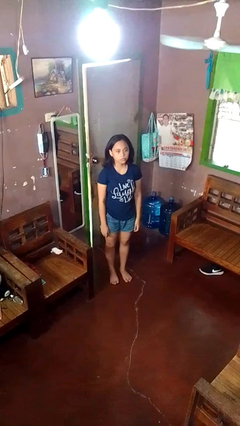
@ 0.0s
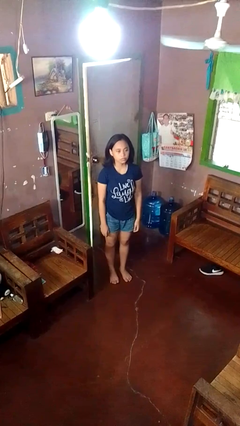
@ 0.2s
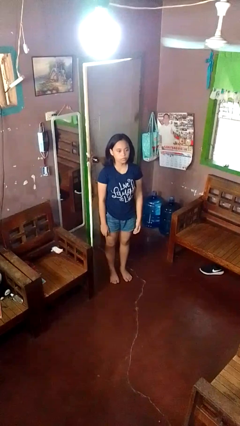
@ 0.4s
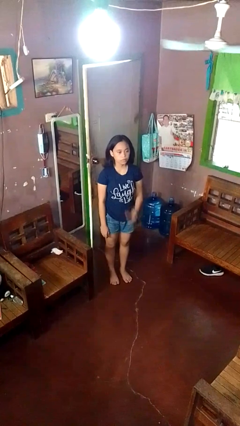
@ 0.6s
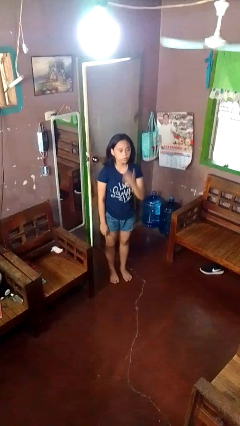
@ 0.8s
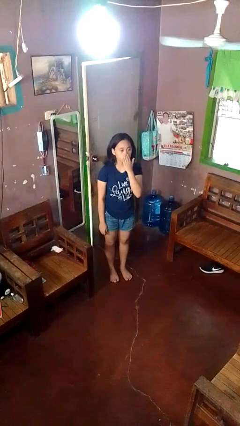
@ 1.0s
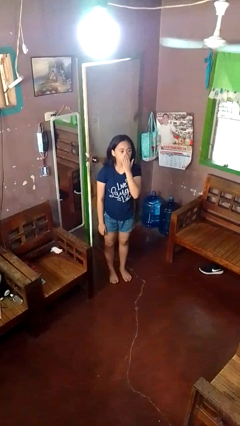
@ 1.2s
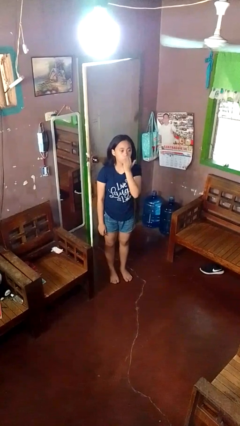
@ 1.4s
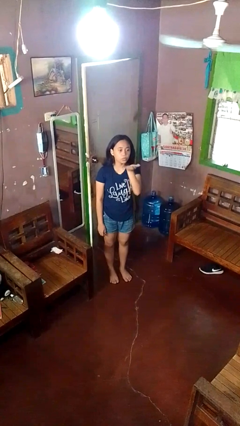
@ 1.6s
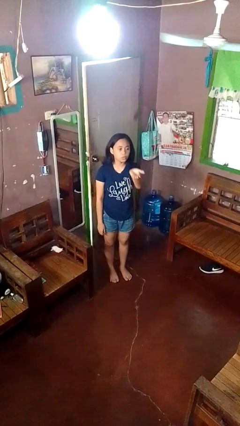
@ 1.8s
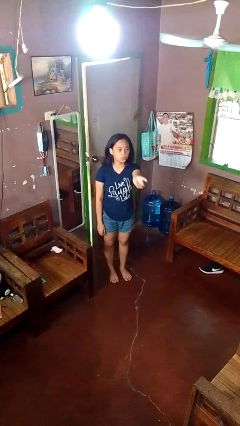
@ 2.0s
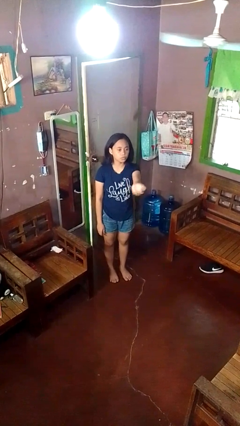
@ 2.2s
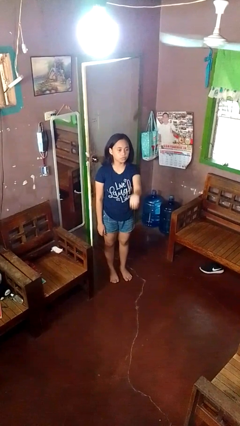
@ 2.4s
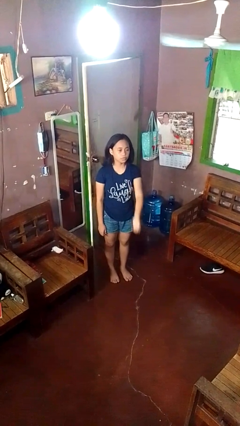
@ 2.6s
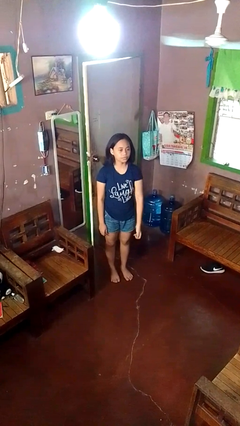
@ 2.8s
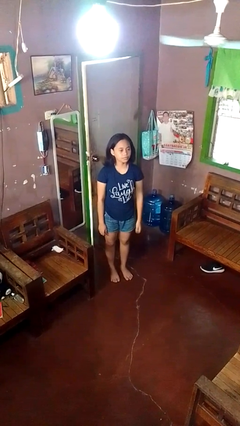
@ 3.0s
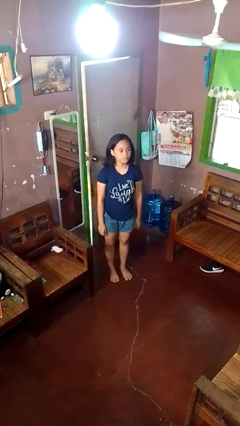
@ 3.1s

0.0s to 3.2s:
person gestures blow kiss

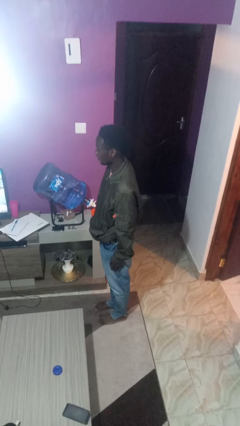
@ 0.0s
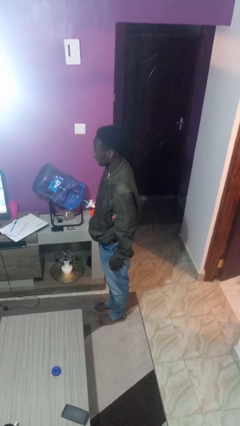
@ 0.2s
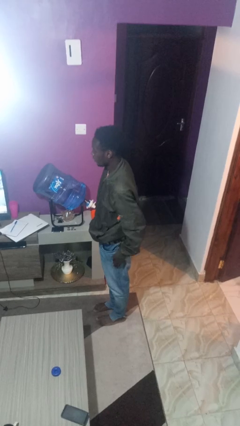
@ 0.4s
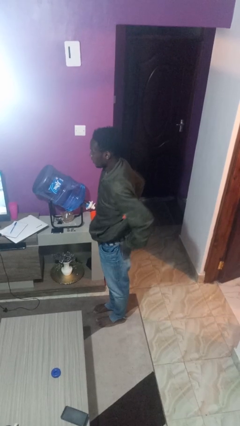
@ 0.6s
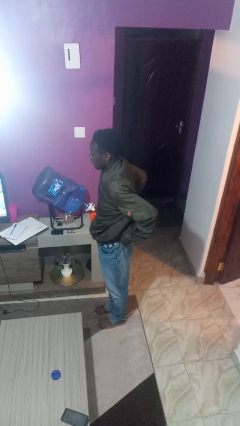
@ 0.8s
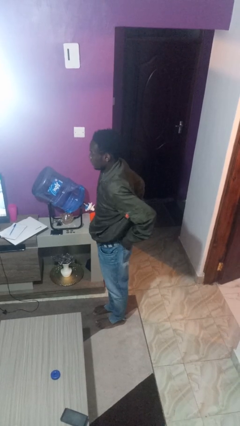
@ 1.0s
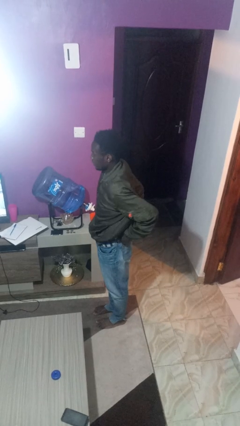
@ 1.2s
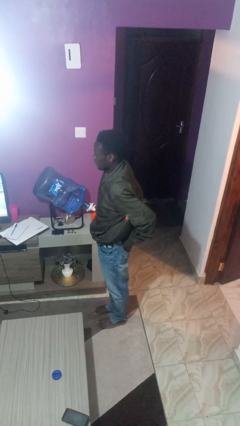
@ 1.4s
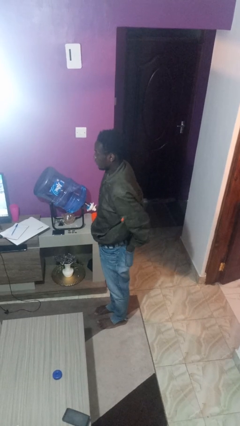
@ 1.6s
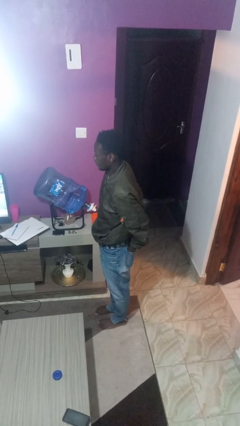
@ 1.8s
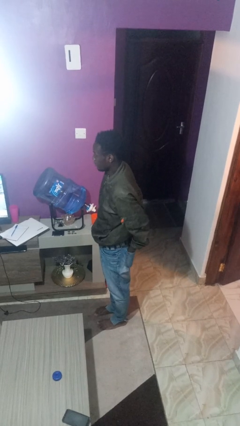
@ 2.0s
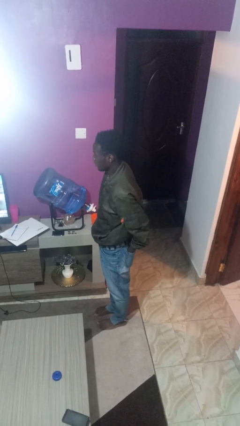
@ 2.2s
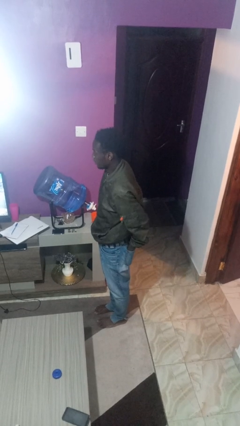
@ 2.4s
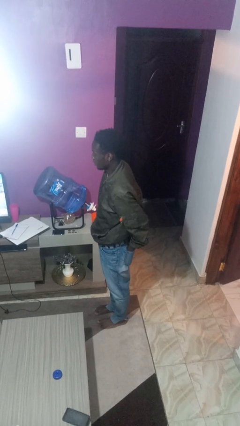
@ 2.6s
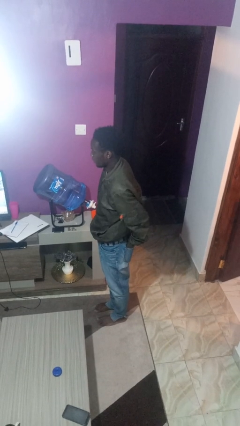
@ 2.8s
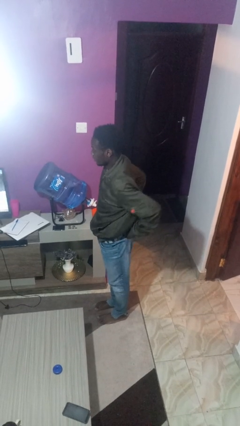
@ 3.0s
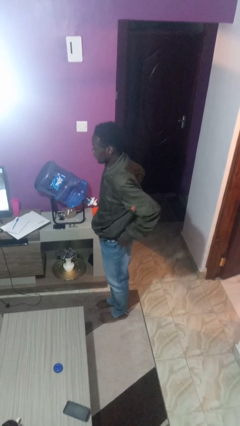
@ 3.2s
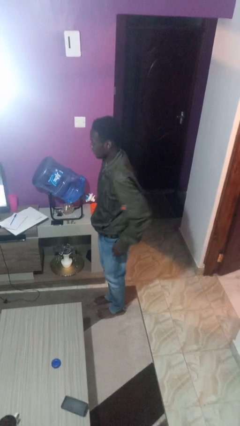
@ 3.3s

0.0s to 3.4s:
person puts hands in back pockets

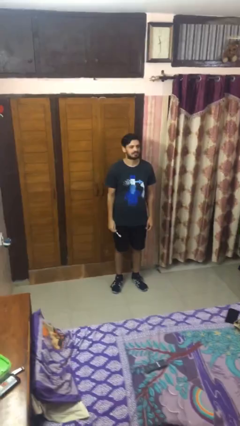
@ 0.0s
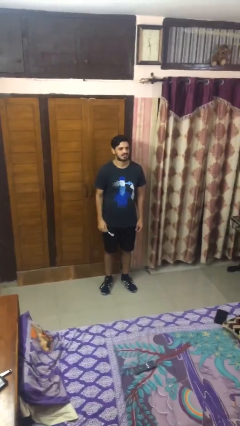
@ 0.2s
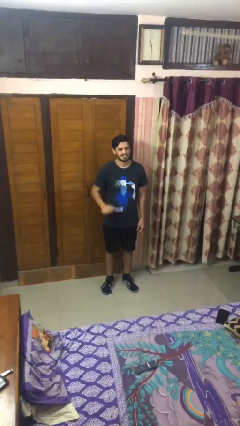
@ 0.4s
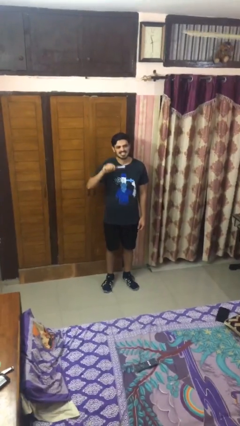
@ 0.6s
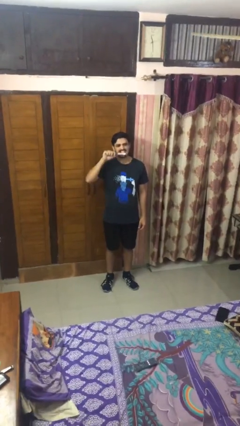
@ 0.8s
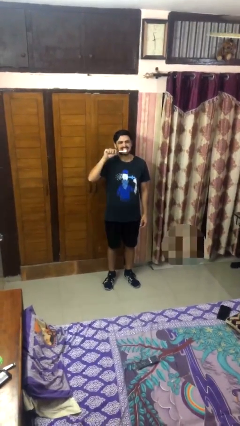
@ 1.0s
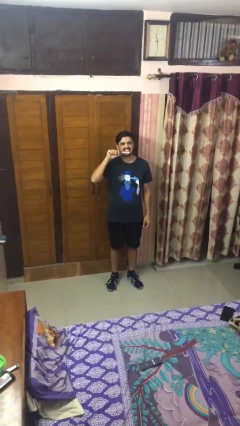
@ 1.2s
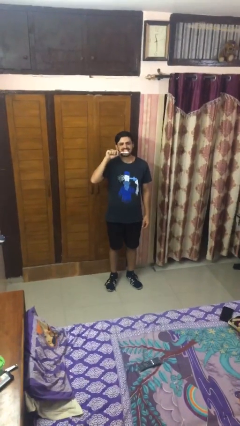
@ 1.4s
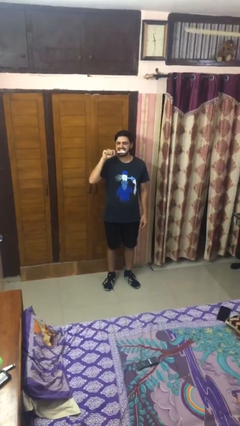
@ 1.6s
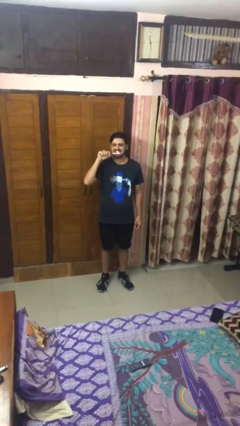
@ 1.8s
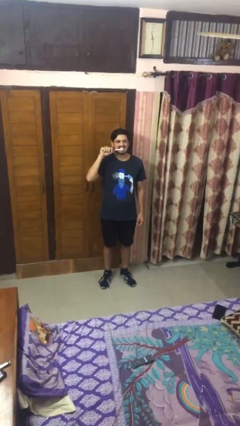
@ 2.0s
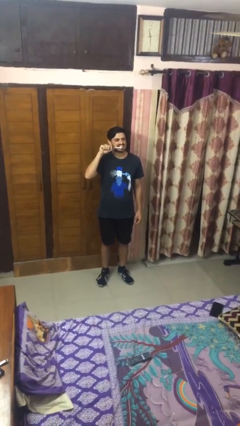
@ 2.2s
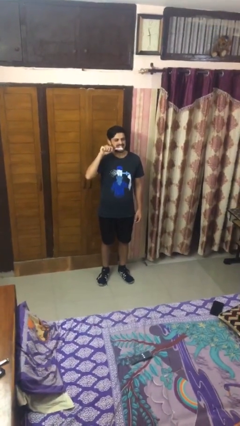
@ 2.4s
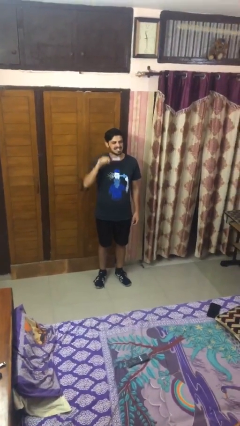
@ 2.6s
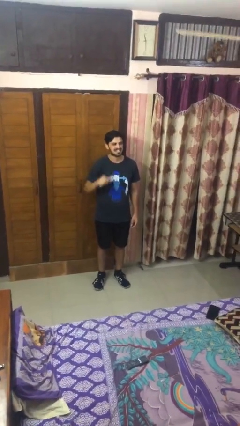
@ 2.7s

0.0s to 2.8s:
person brushes teeth

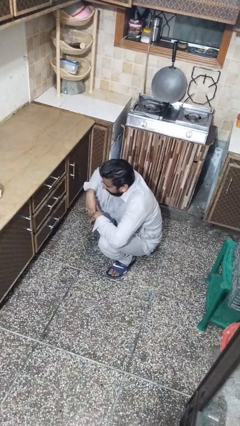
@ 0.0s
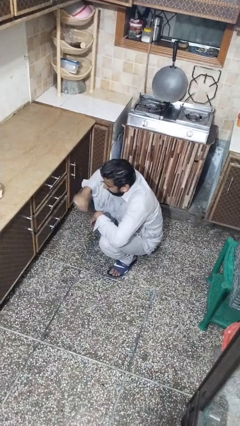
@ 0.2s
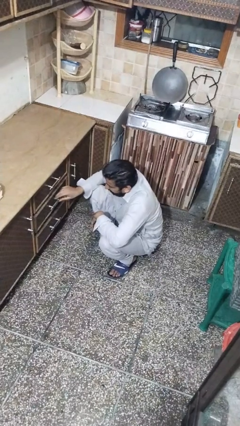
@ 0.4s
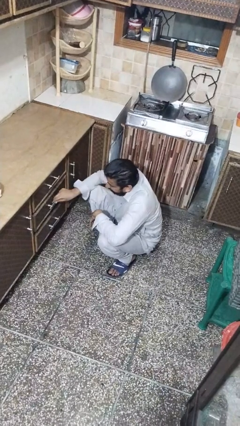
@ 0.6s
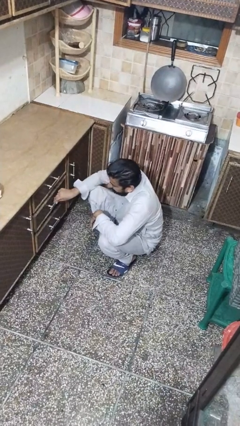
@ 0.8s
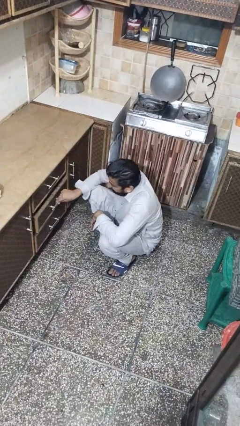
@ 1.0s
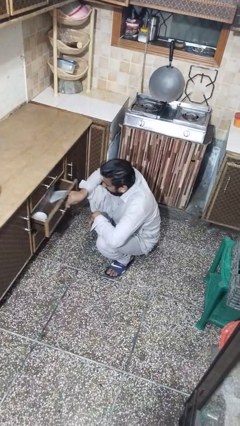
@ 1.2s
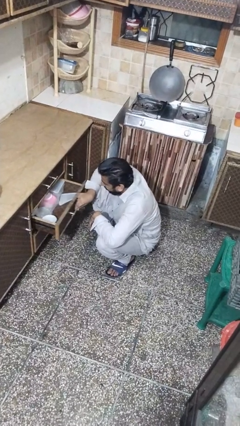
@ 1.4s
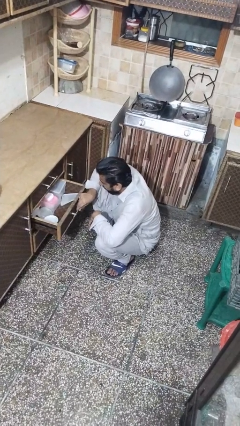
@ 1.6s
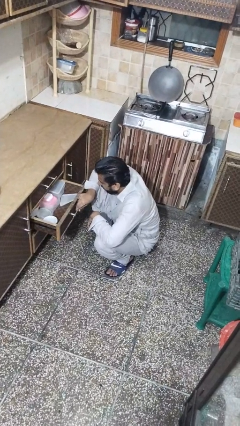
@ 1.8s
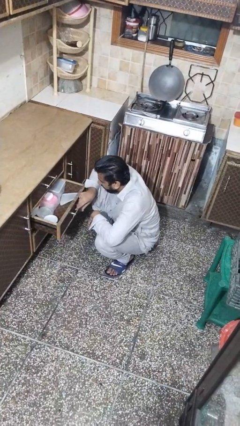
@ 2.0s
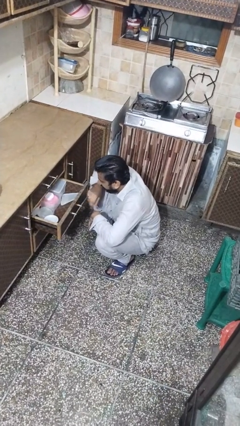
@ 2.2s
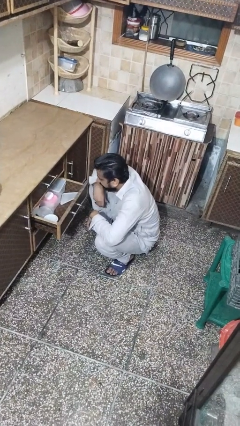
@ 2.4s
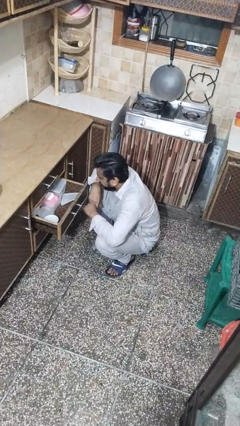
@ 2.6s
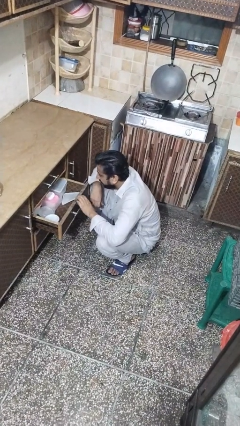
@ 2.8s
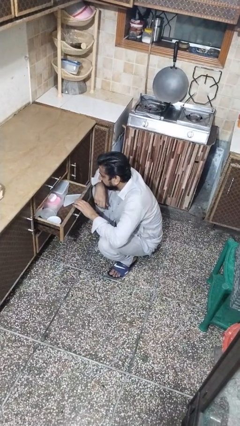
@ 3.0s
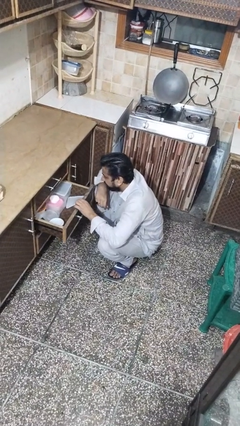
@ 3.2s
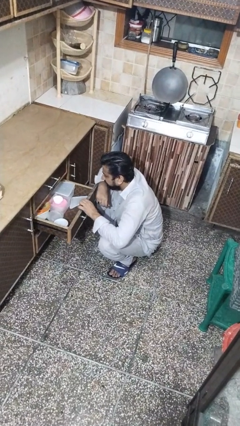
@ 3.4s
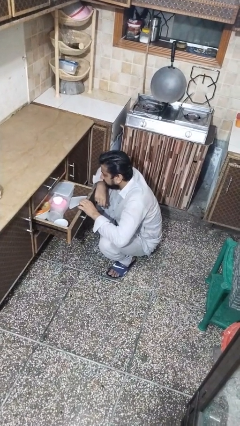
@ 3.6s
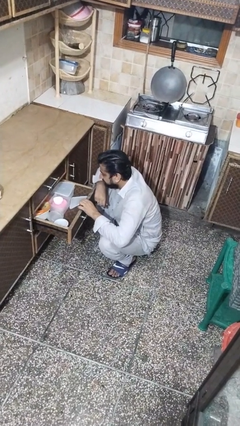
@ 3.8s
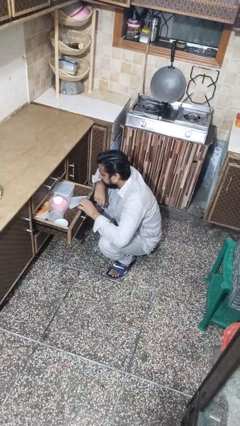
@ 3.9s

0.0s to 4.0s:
person opens kitchen drawer

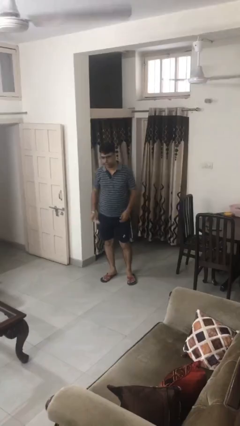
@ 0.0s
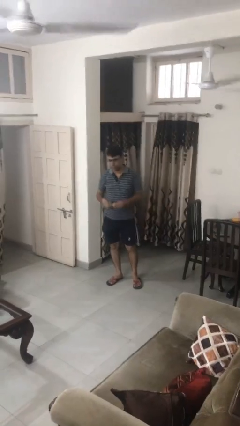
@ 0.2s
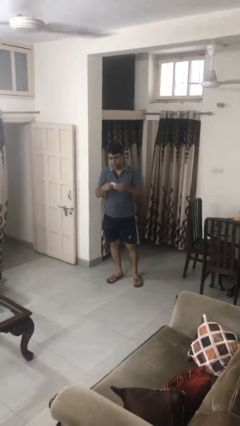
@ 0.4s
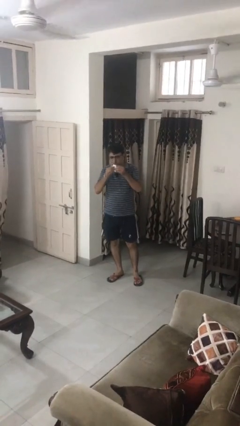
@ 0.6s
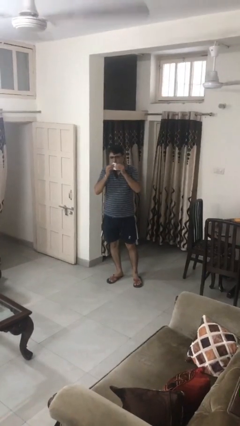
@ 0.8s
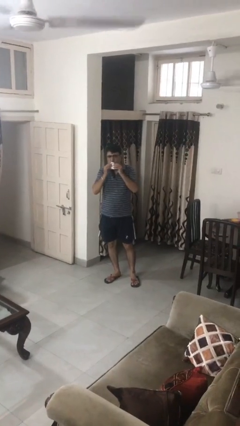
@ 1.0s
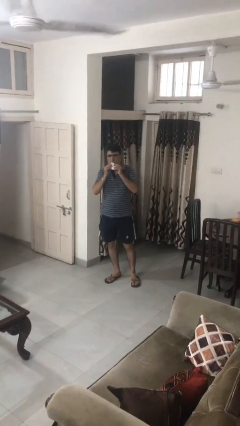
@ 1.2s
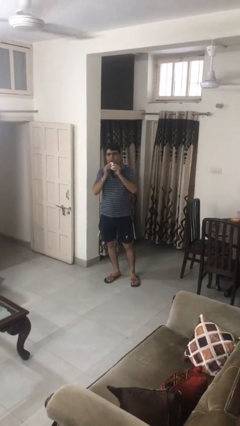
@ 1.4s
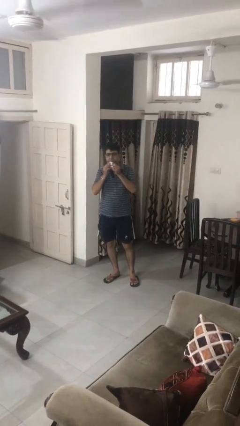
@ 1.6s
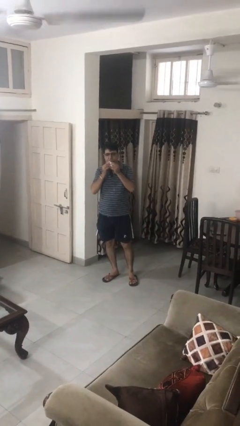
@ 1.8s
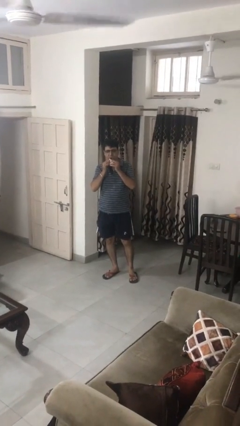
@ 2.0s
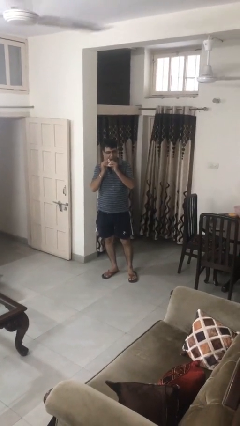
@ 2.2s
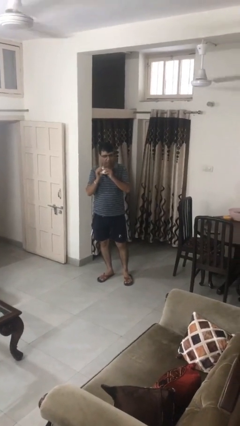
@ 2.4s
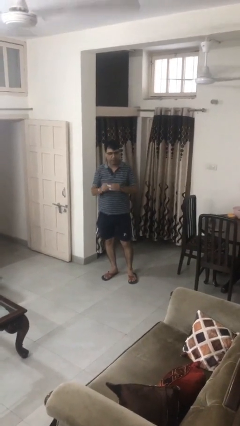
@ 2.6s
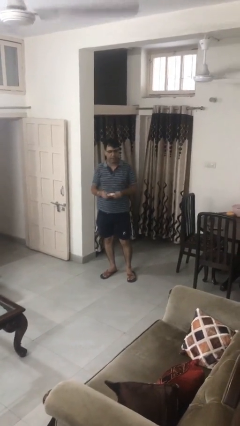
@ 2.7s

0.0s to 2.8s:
person wipes mouth with napkin

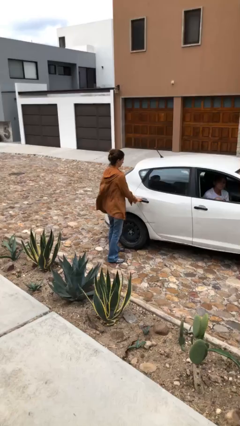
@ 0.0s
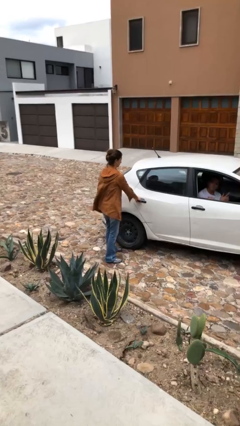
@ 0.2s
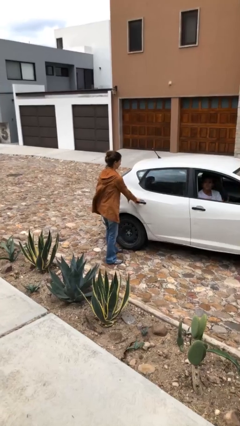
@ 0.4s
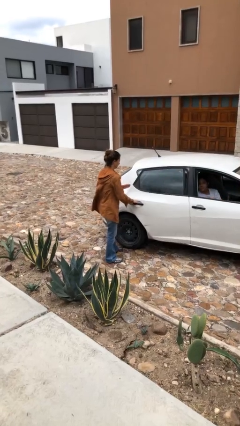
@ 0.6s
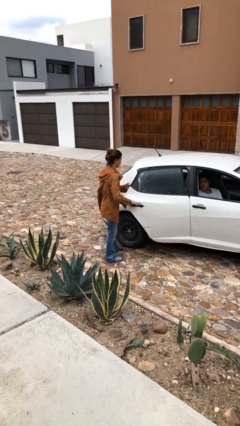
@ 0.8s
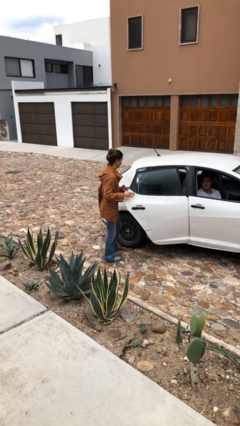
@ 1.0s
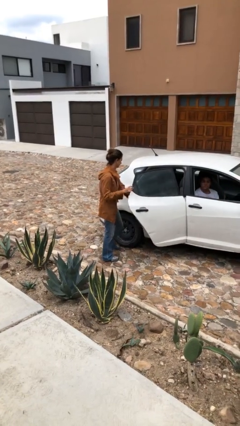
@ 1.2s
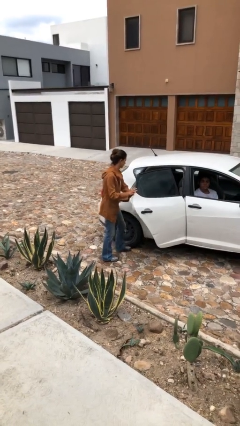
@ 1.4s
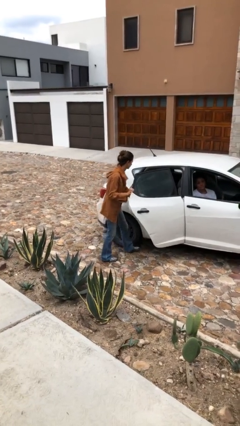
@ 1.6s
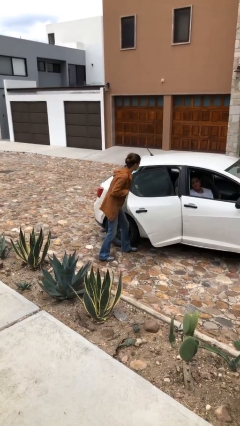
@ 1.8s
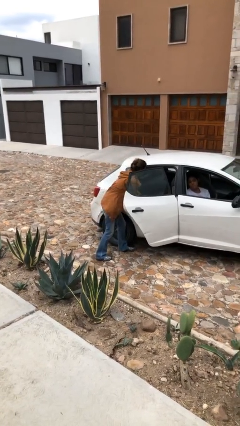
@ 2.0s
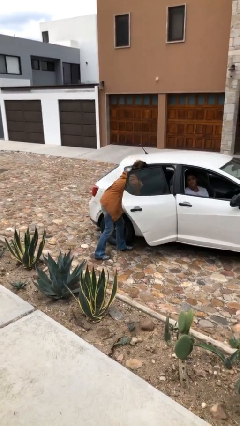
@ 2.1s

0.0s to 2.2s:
person opens car door
